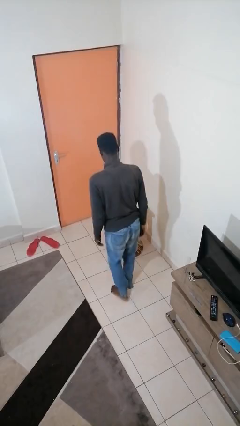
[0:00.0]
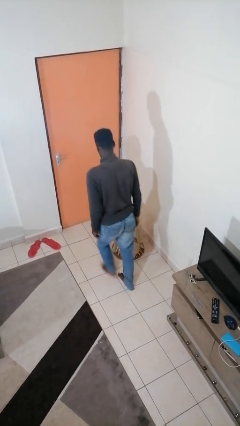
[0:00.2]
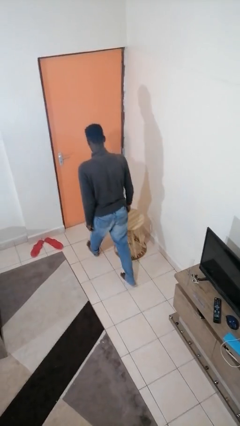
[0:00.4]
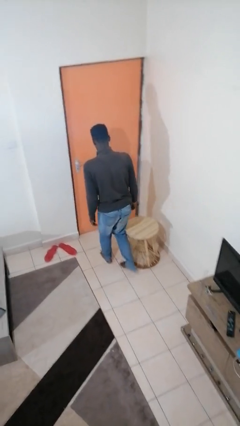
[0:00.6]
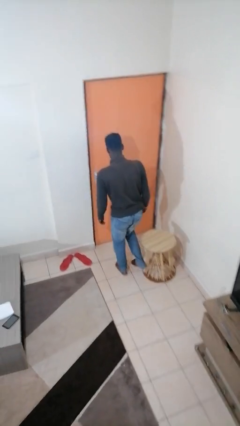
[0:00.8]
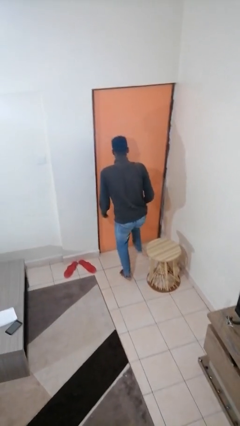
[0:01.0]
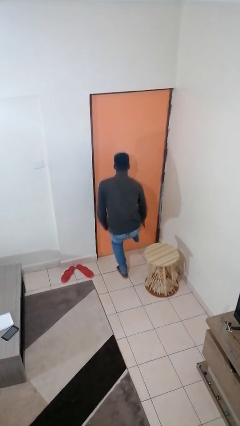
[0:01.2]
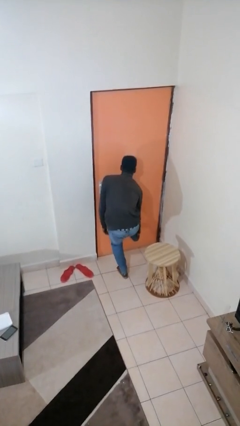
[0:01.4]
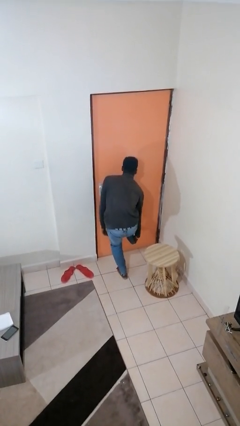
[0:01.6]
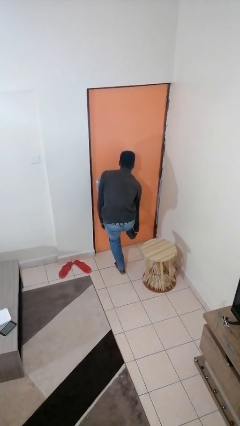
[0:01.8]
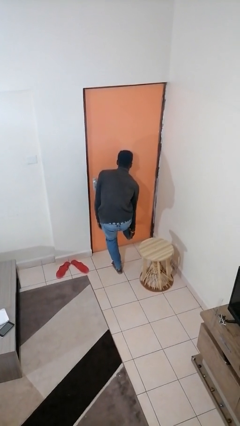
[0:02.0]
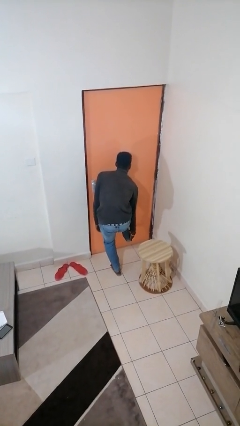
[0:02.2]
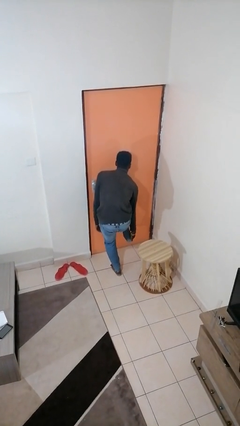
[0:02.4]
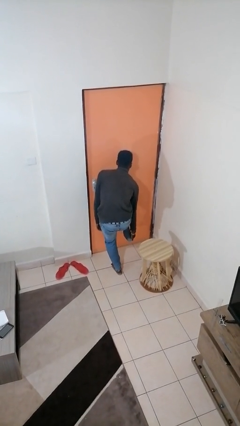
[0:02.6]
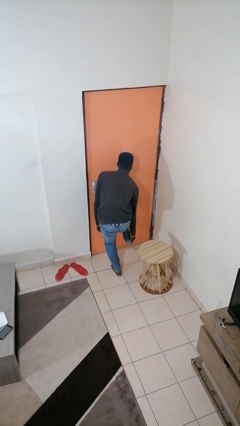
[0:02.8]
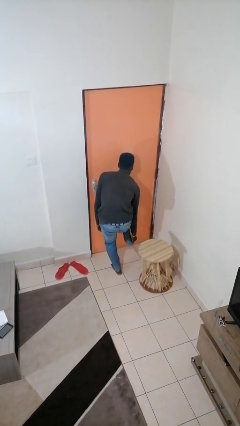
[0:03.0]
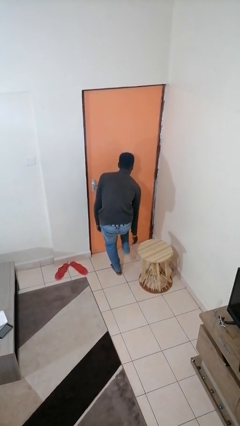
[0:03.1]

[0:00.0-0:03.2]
person stubs toe

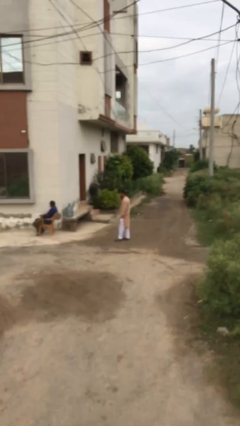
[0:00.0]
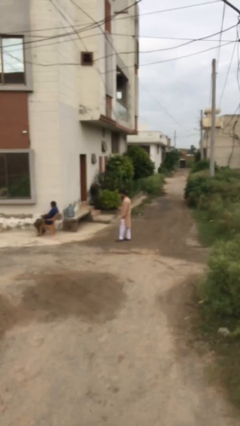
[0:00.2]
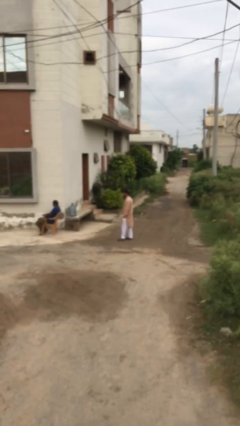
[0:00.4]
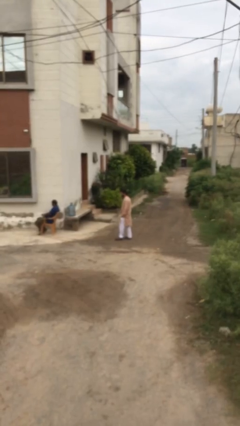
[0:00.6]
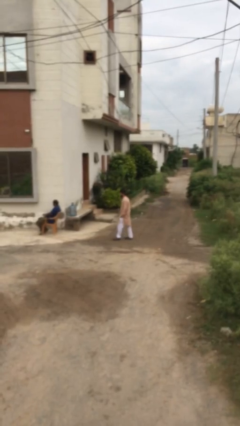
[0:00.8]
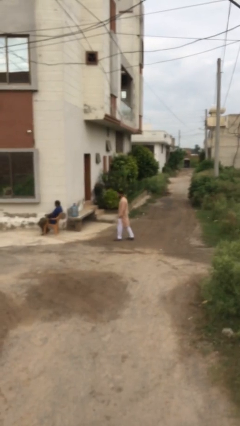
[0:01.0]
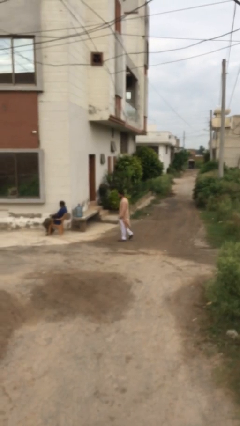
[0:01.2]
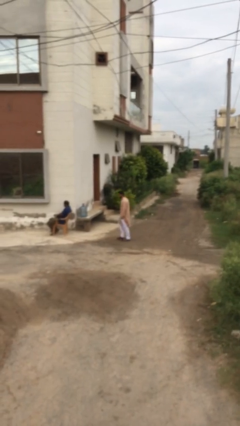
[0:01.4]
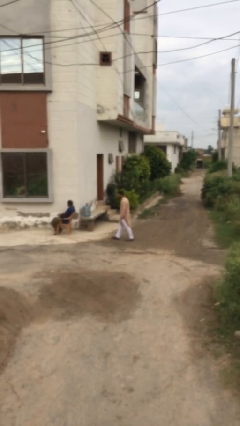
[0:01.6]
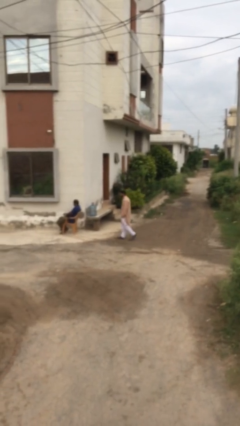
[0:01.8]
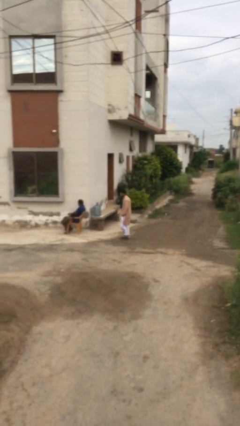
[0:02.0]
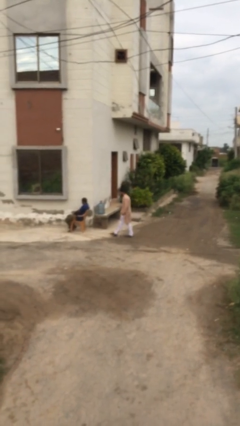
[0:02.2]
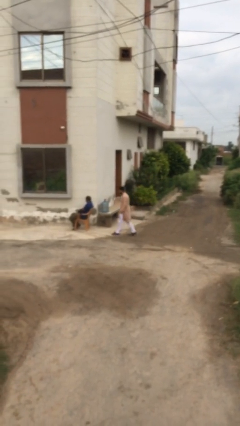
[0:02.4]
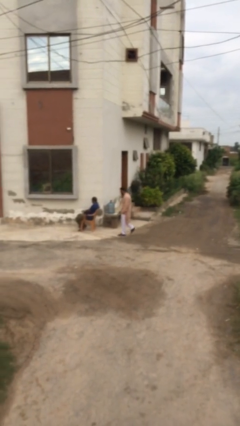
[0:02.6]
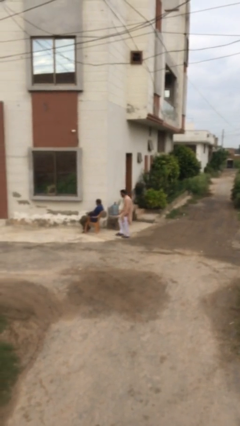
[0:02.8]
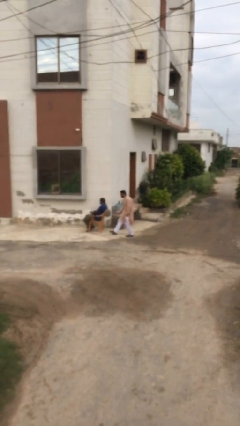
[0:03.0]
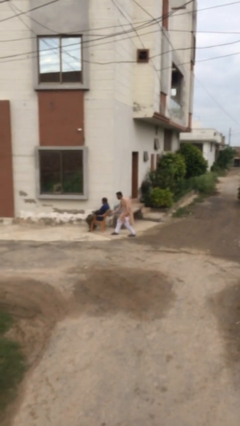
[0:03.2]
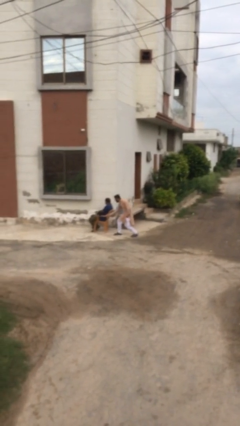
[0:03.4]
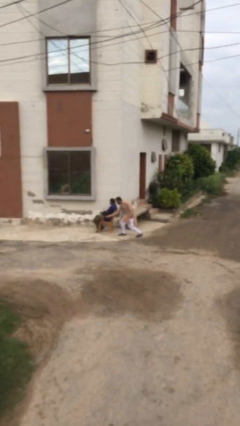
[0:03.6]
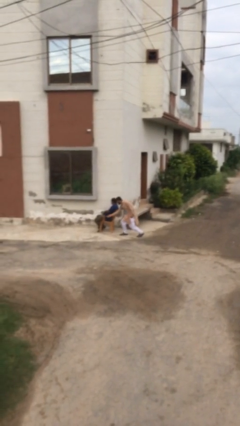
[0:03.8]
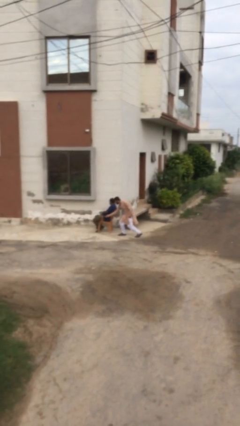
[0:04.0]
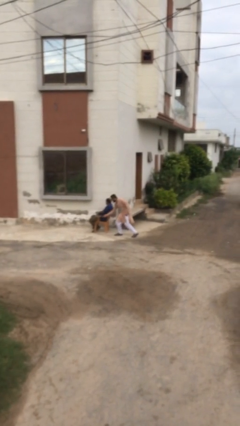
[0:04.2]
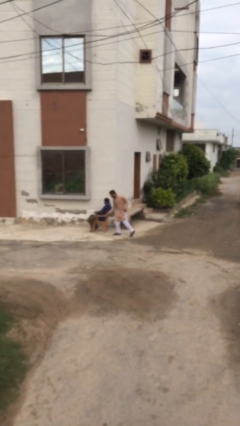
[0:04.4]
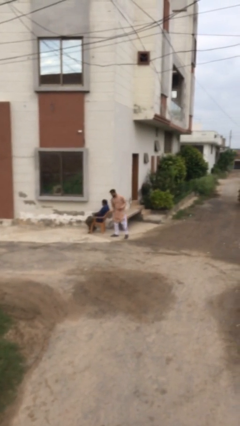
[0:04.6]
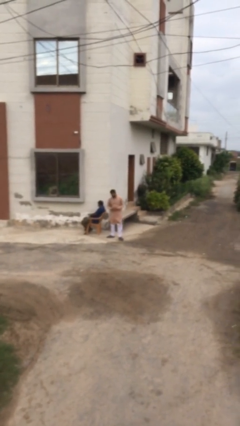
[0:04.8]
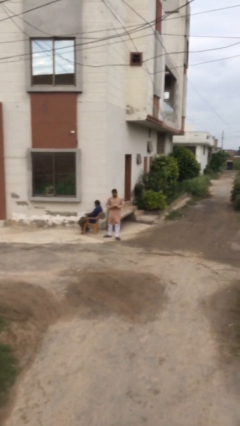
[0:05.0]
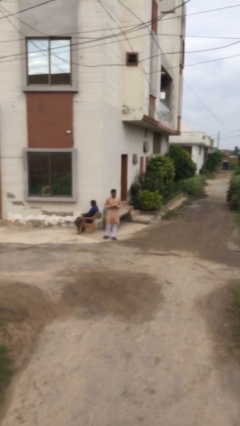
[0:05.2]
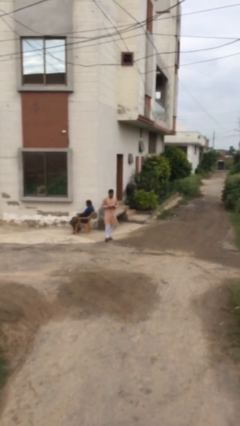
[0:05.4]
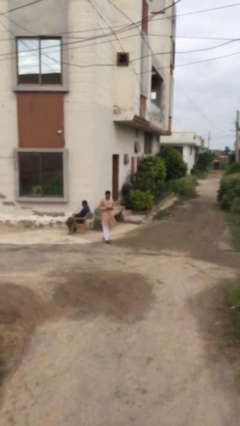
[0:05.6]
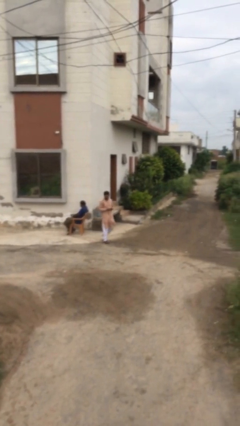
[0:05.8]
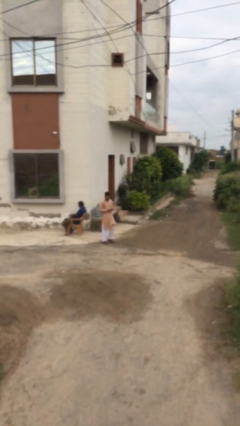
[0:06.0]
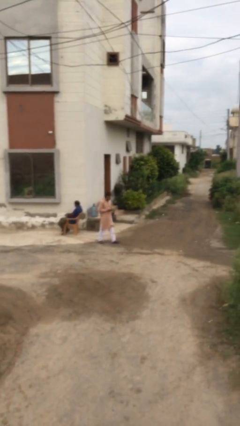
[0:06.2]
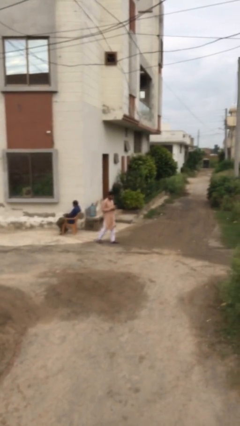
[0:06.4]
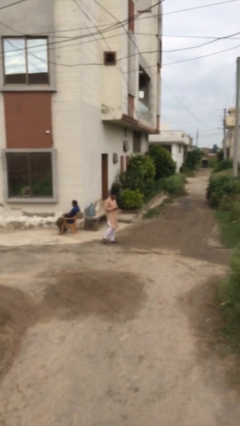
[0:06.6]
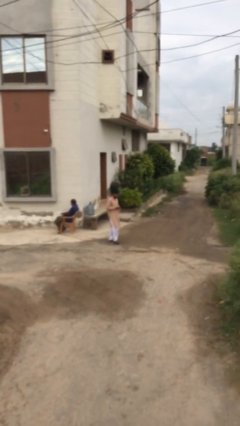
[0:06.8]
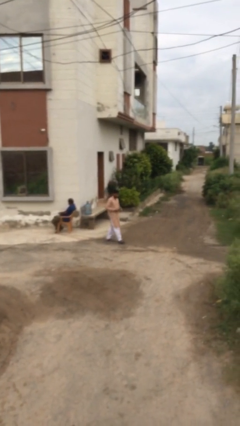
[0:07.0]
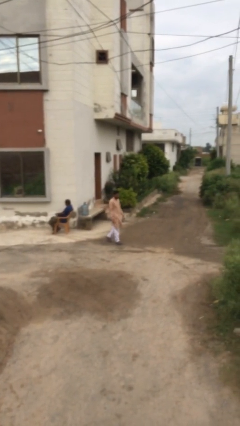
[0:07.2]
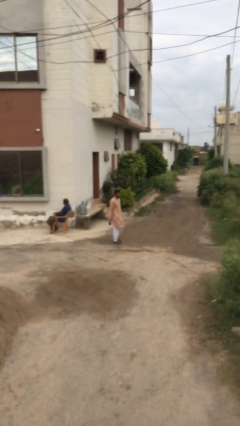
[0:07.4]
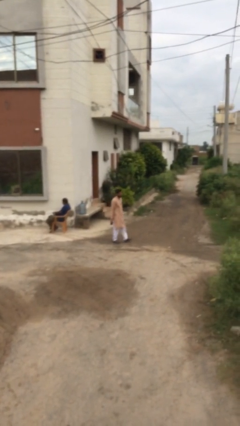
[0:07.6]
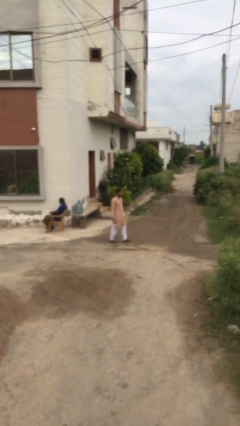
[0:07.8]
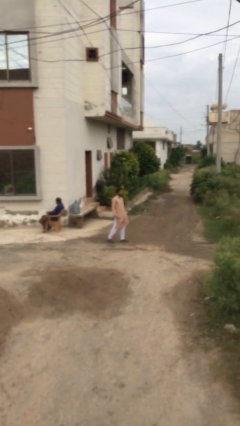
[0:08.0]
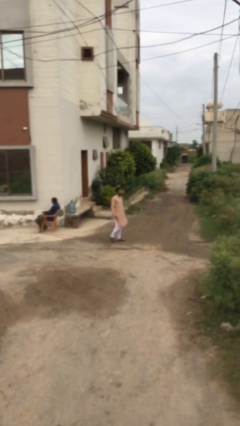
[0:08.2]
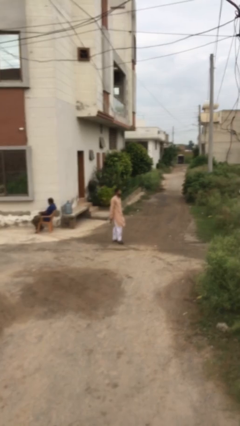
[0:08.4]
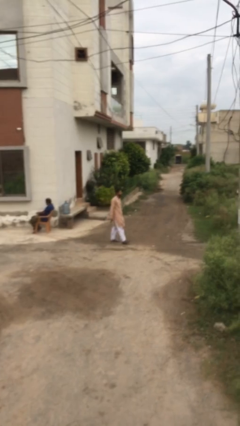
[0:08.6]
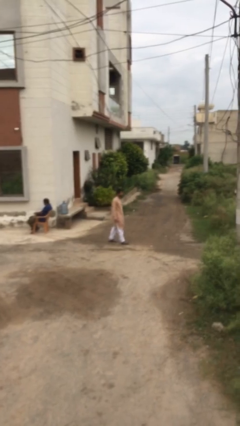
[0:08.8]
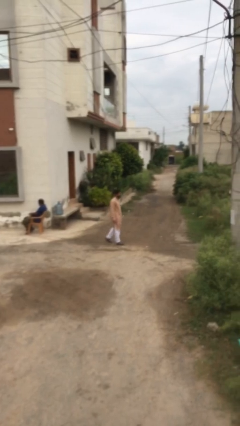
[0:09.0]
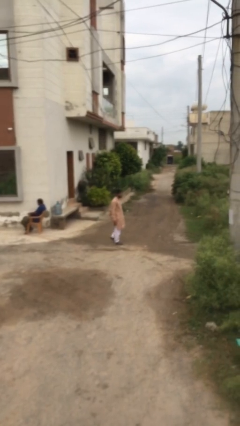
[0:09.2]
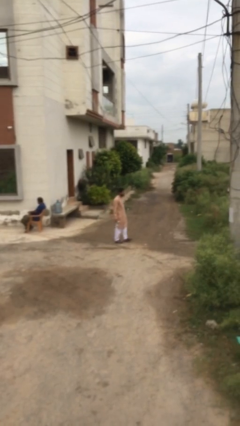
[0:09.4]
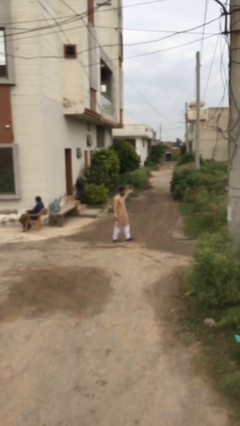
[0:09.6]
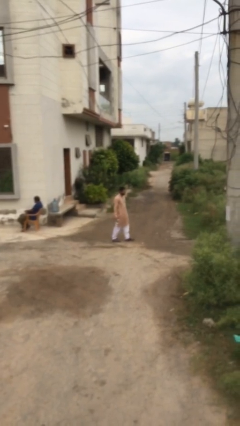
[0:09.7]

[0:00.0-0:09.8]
person steals object from person

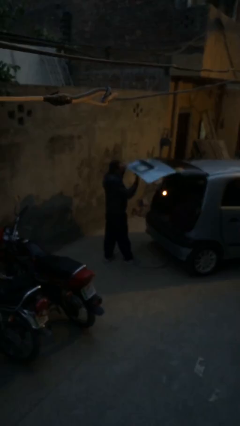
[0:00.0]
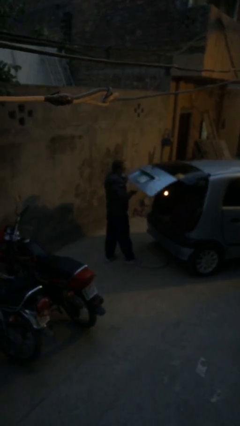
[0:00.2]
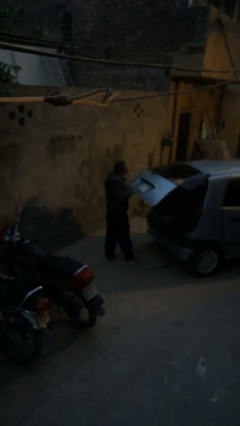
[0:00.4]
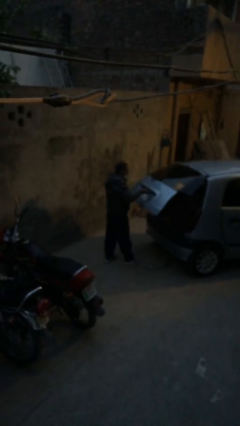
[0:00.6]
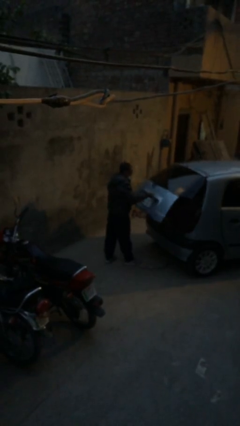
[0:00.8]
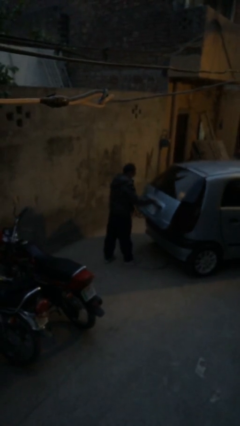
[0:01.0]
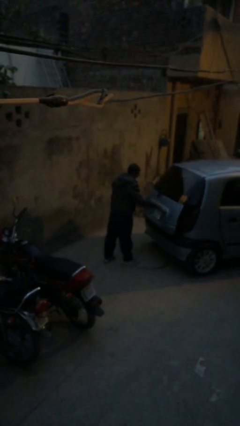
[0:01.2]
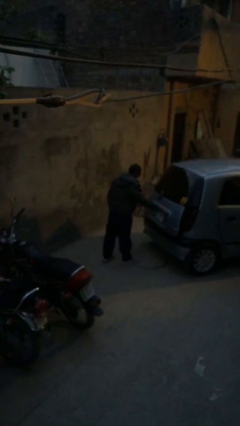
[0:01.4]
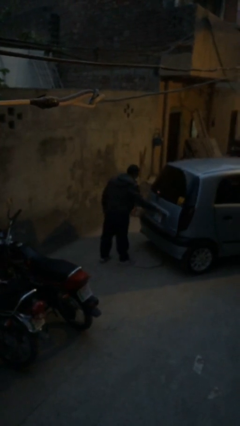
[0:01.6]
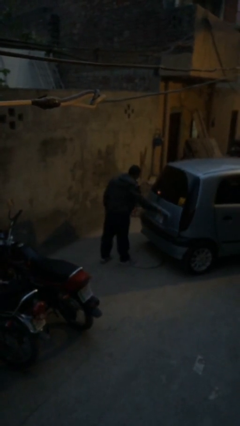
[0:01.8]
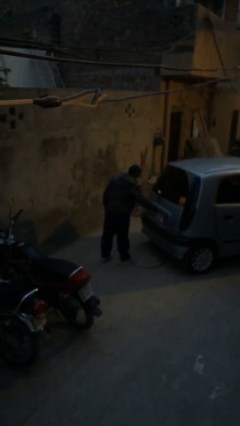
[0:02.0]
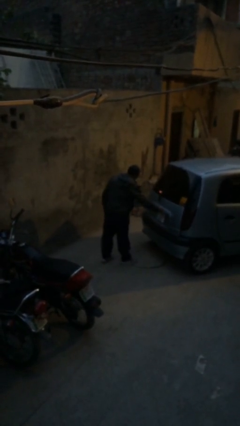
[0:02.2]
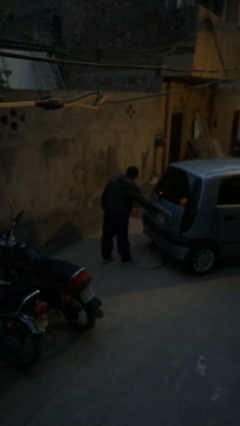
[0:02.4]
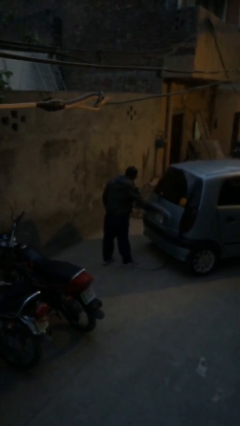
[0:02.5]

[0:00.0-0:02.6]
person closes car trunk

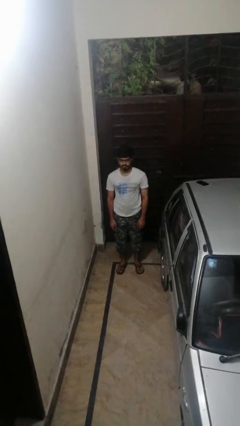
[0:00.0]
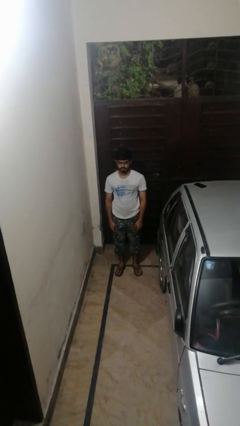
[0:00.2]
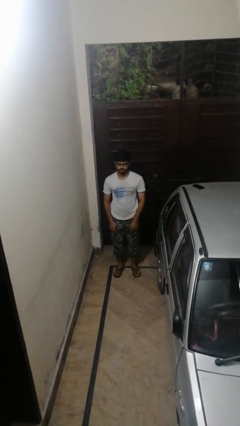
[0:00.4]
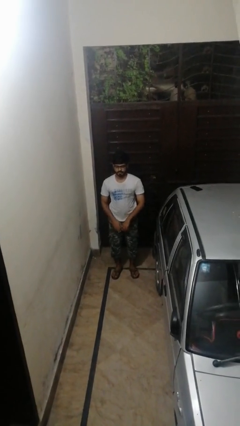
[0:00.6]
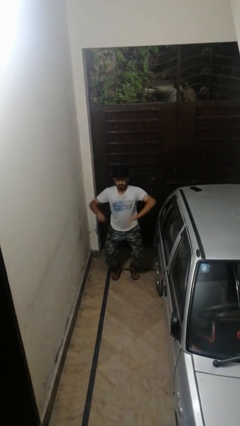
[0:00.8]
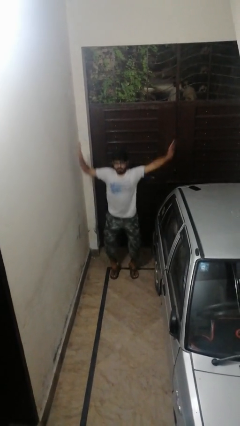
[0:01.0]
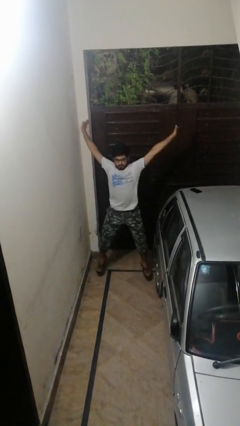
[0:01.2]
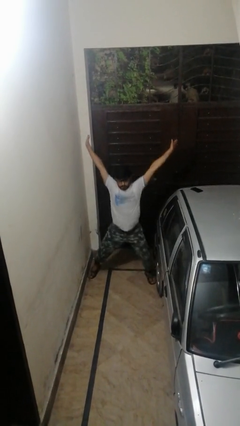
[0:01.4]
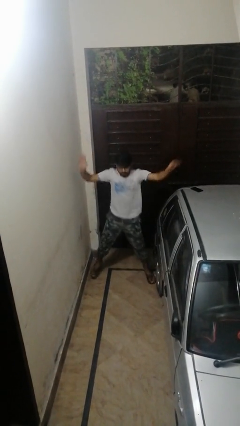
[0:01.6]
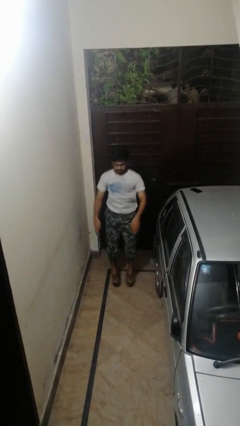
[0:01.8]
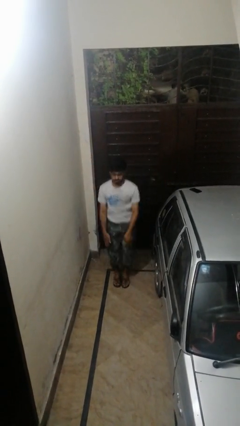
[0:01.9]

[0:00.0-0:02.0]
person exercises with jumping jacks
